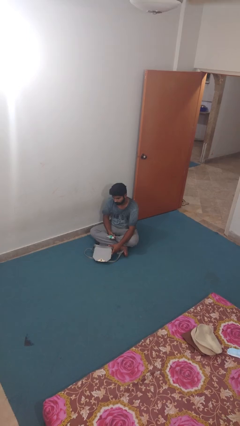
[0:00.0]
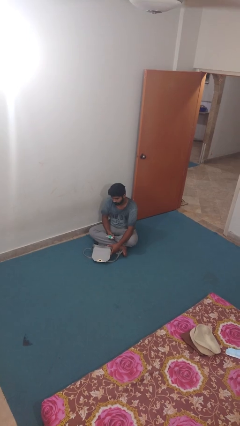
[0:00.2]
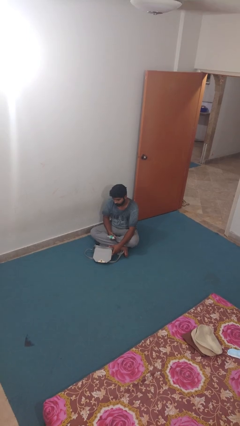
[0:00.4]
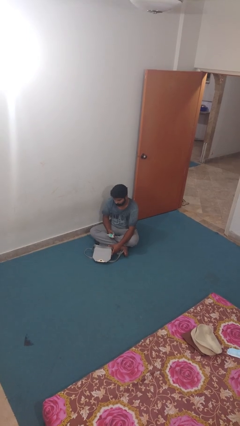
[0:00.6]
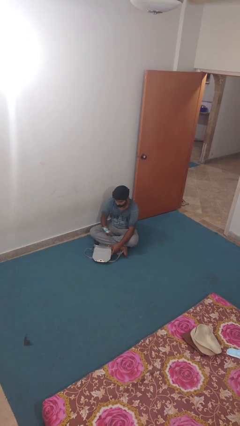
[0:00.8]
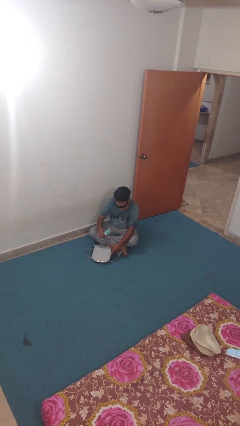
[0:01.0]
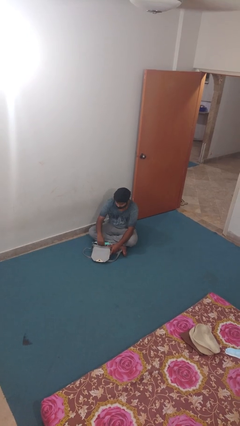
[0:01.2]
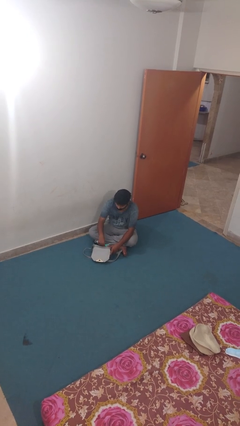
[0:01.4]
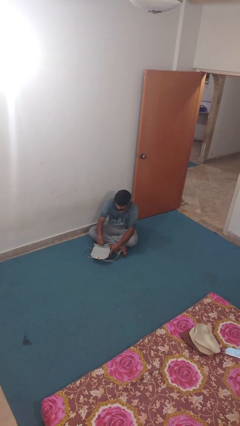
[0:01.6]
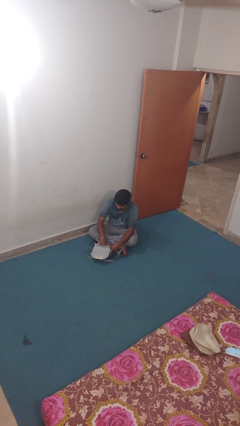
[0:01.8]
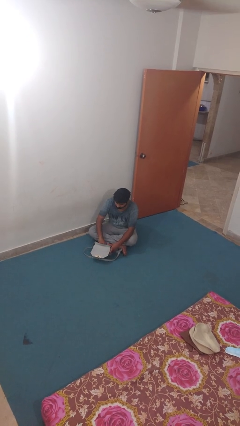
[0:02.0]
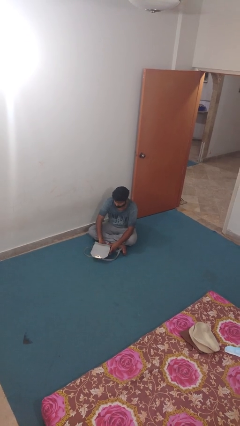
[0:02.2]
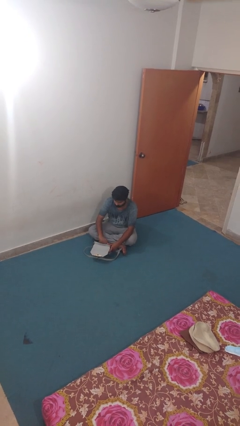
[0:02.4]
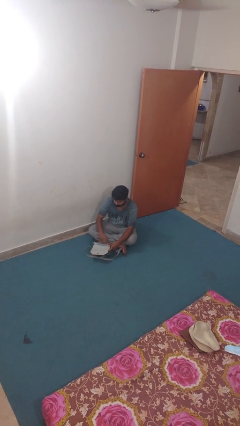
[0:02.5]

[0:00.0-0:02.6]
person puts object into purse

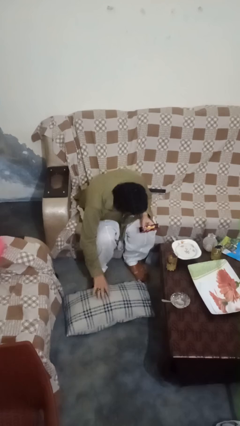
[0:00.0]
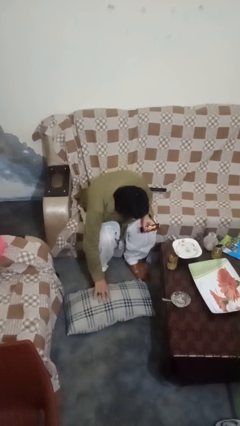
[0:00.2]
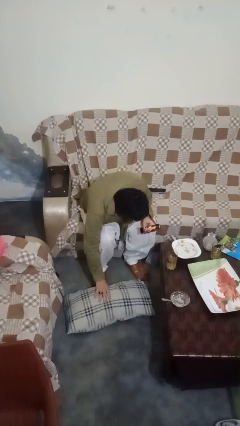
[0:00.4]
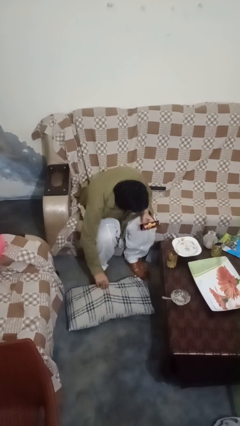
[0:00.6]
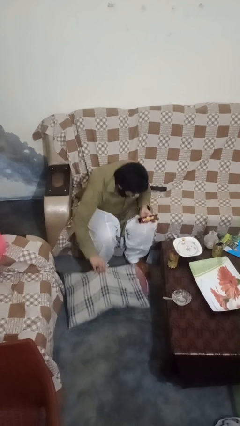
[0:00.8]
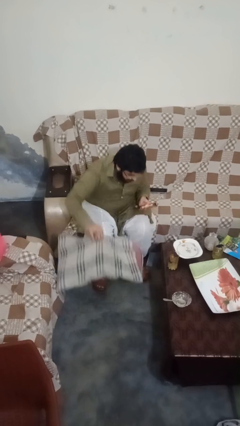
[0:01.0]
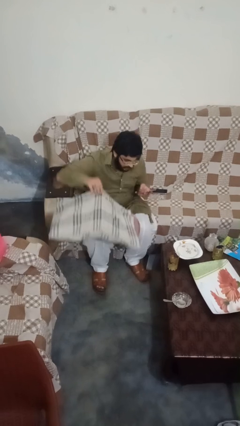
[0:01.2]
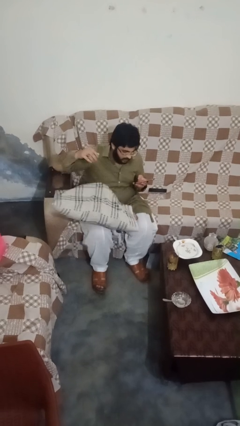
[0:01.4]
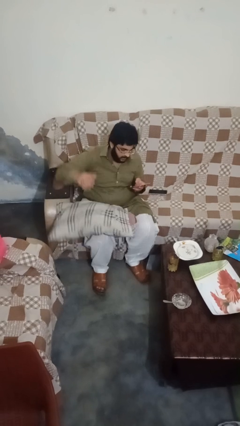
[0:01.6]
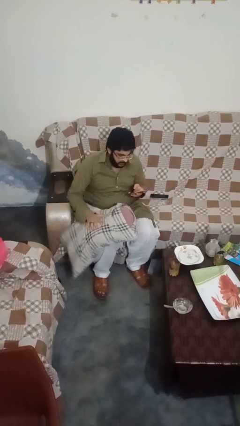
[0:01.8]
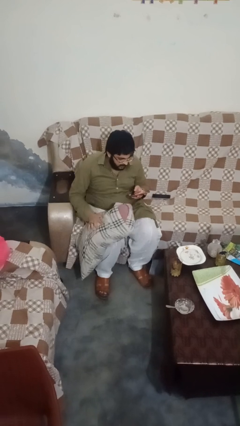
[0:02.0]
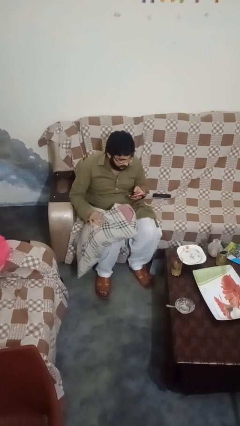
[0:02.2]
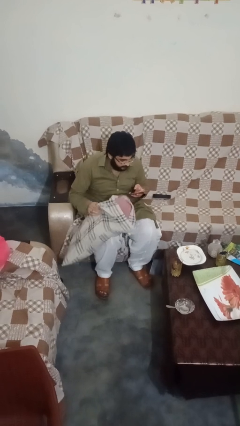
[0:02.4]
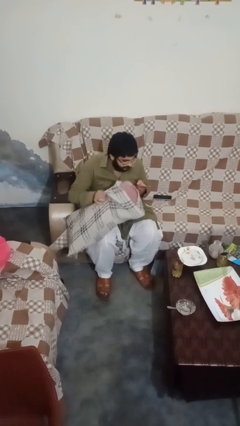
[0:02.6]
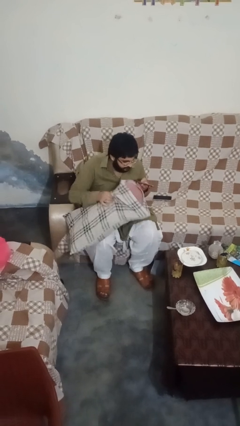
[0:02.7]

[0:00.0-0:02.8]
person picks up object from floor

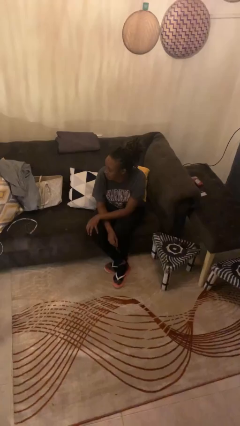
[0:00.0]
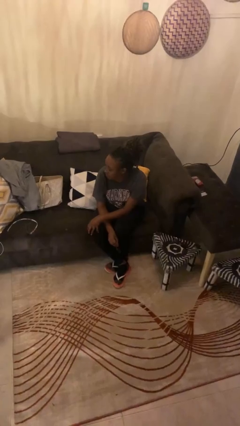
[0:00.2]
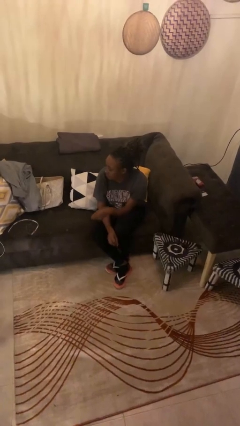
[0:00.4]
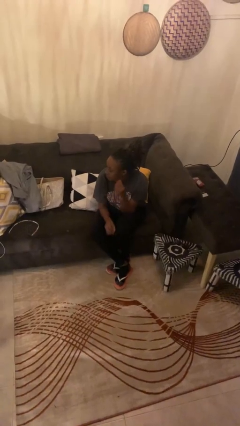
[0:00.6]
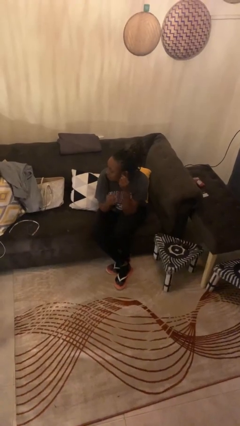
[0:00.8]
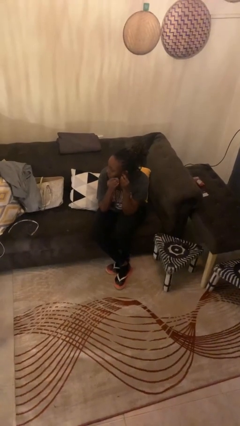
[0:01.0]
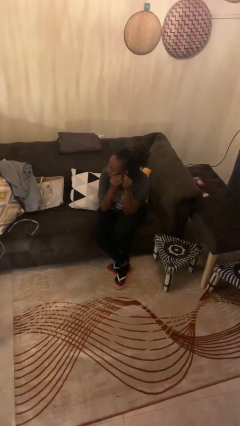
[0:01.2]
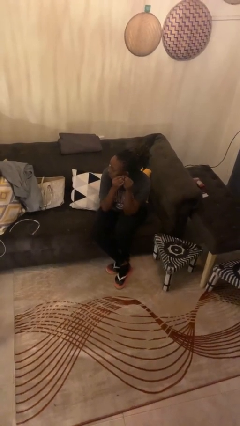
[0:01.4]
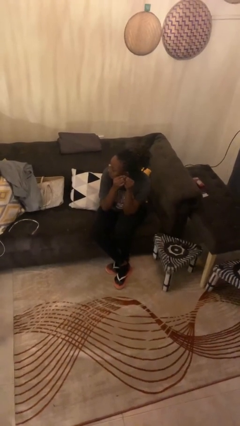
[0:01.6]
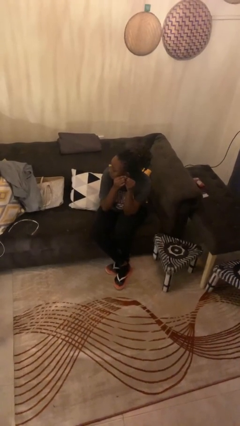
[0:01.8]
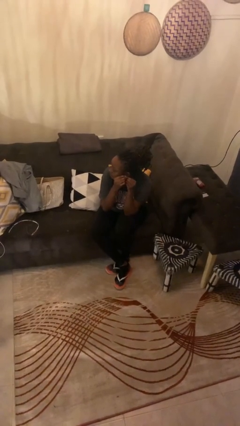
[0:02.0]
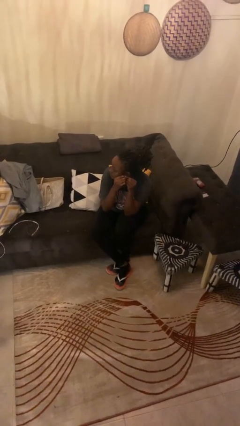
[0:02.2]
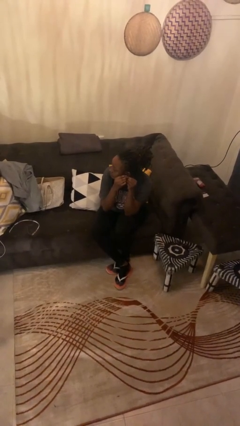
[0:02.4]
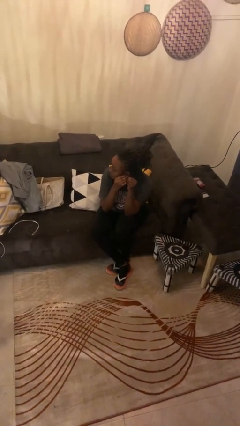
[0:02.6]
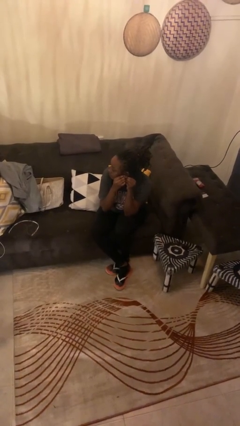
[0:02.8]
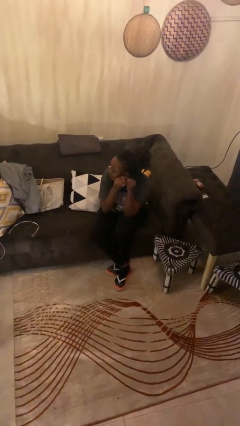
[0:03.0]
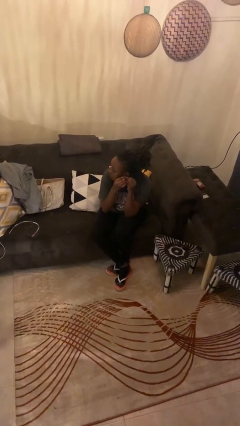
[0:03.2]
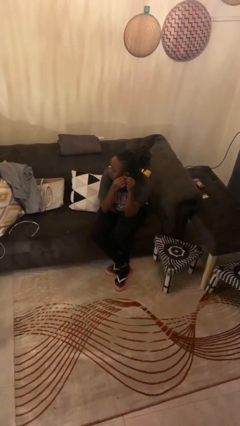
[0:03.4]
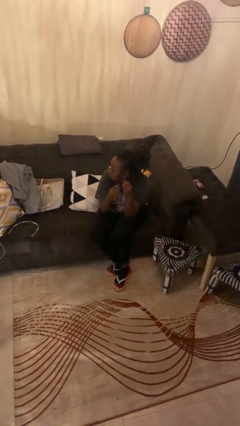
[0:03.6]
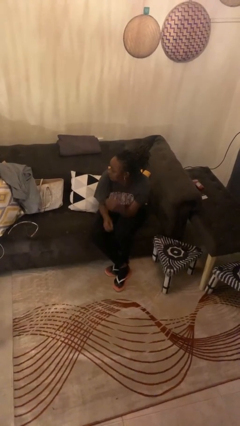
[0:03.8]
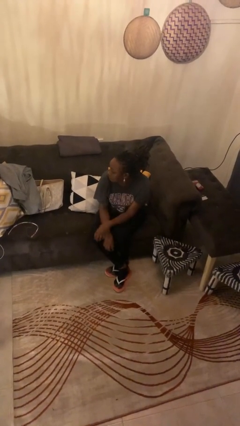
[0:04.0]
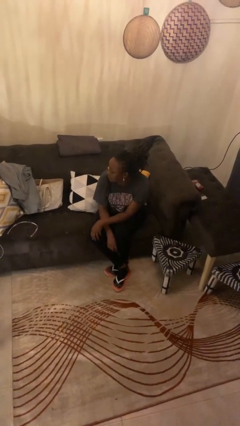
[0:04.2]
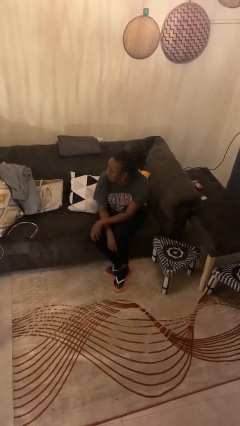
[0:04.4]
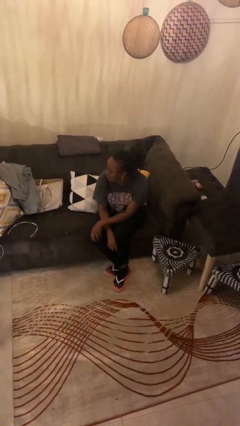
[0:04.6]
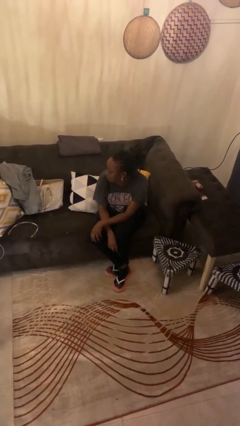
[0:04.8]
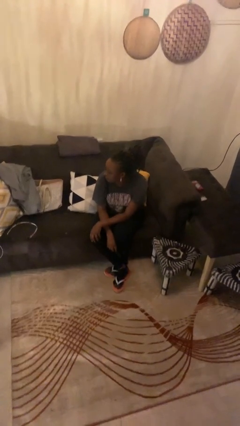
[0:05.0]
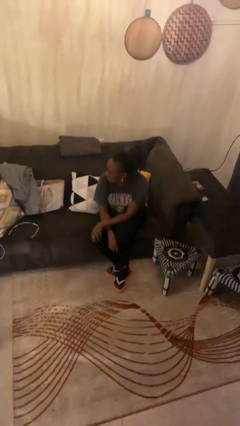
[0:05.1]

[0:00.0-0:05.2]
person puts on earrings

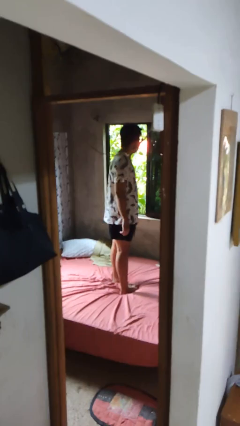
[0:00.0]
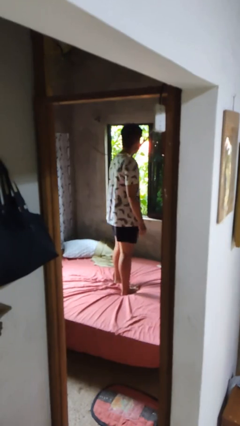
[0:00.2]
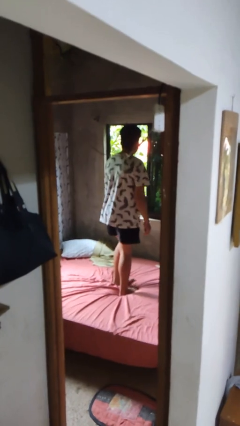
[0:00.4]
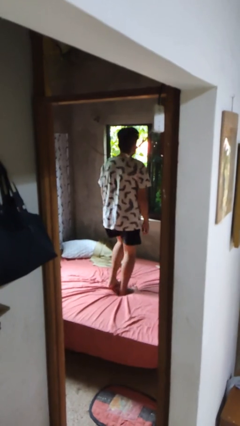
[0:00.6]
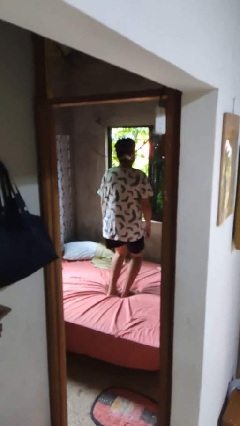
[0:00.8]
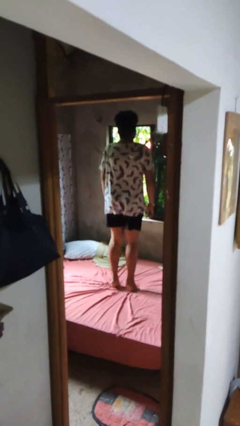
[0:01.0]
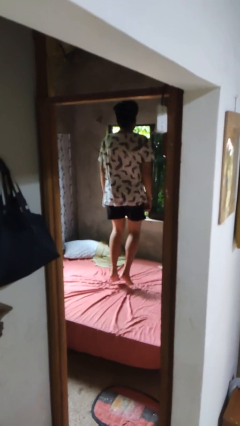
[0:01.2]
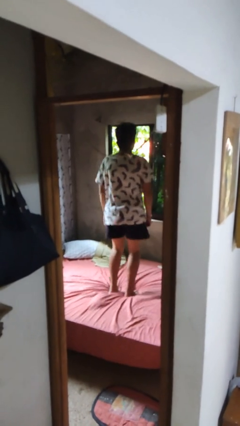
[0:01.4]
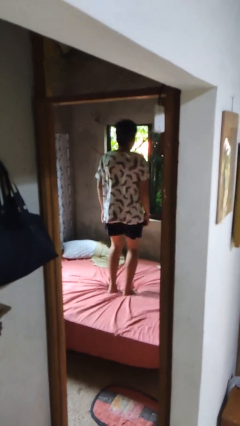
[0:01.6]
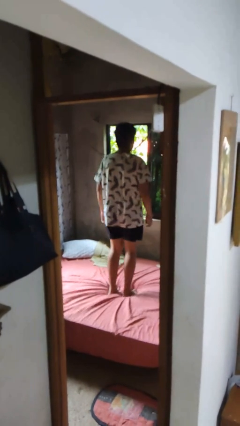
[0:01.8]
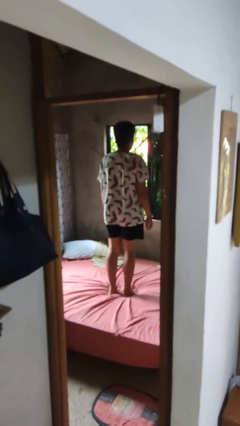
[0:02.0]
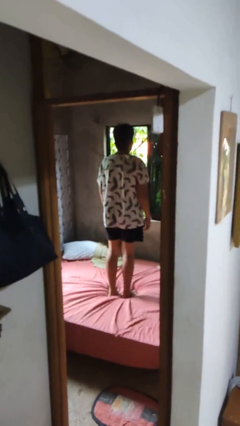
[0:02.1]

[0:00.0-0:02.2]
person jumps on bed

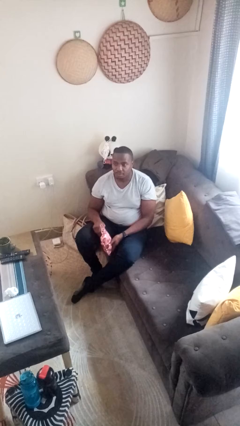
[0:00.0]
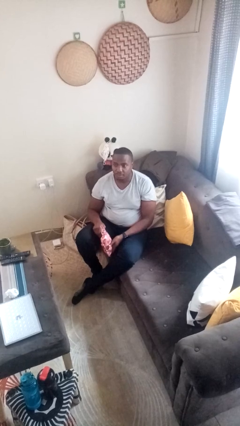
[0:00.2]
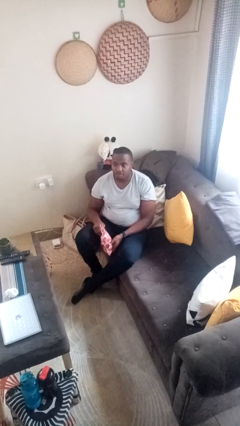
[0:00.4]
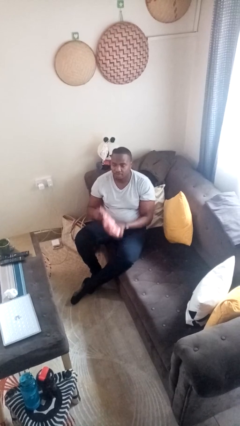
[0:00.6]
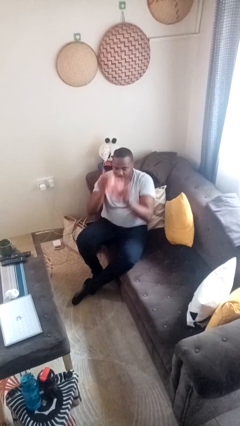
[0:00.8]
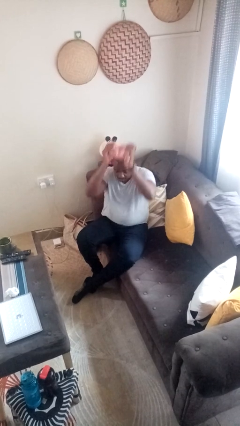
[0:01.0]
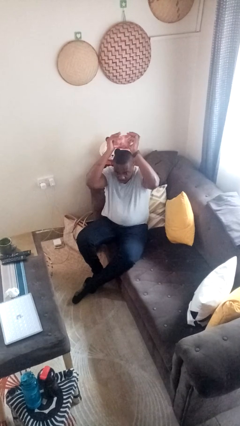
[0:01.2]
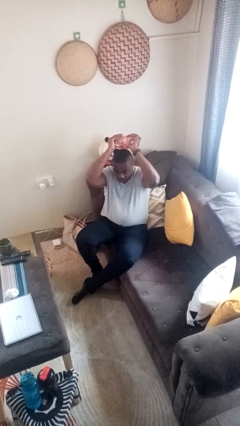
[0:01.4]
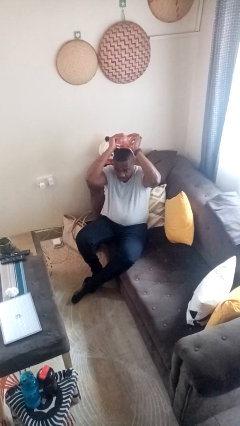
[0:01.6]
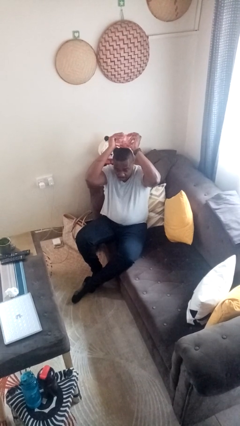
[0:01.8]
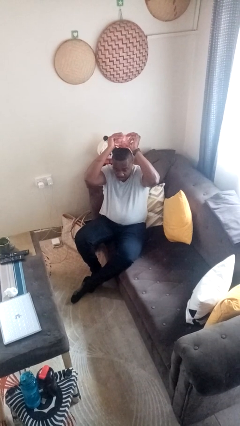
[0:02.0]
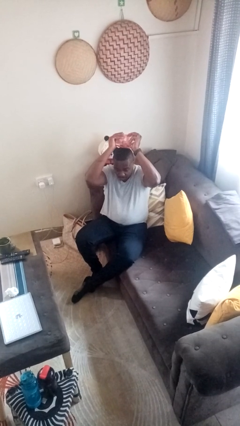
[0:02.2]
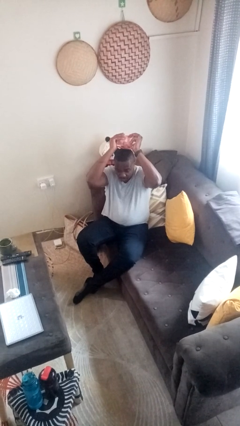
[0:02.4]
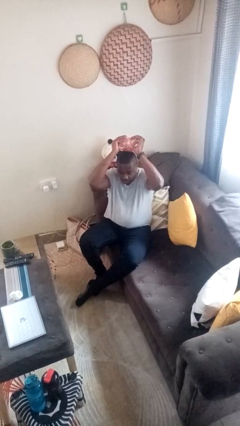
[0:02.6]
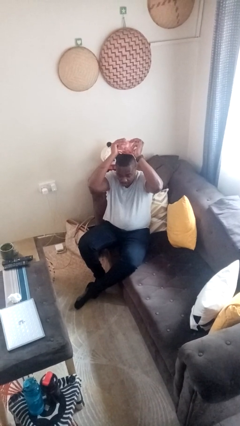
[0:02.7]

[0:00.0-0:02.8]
person holds object above head

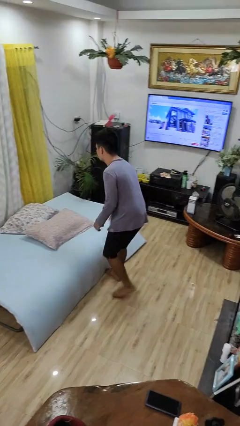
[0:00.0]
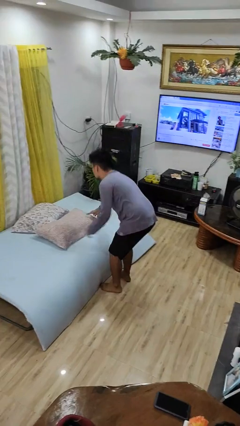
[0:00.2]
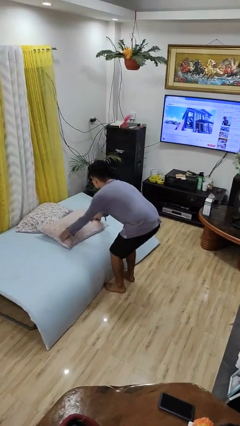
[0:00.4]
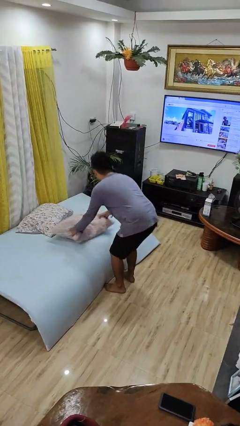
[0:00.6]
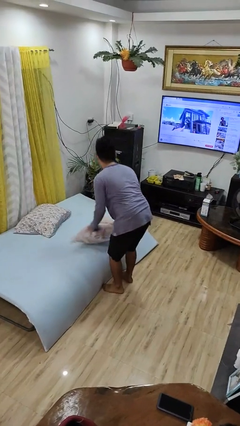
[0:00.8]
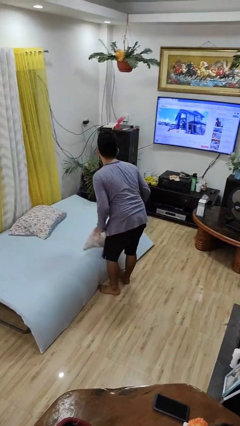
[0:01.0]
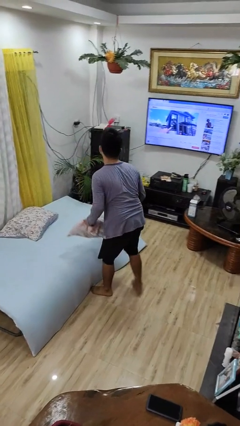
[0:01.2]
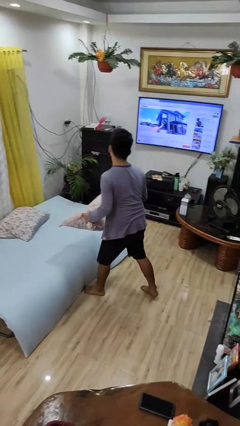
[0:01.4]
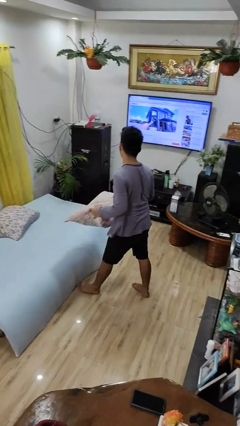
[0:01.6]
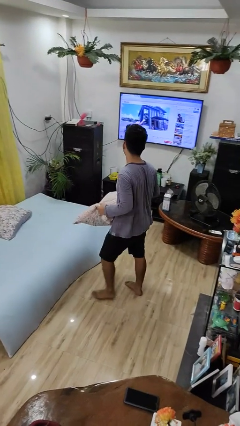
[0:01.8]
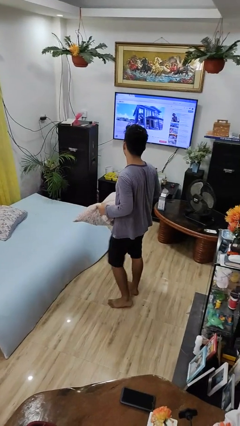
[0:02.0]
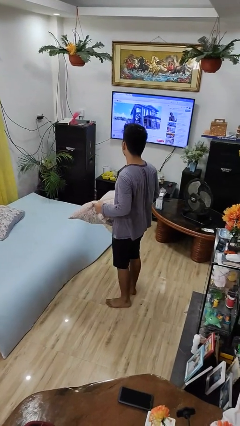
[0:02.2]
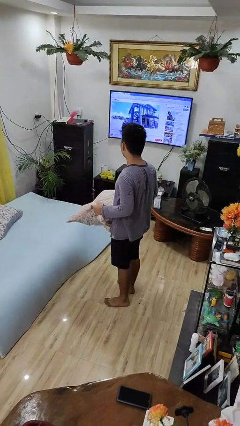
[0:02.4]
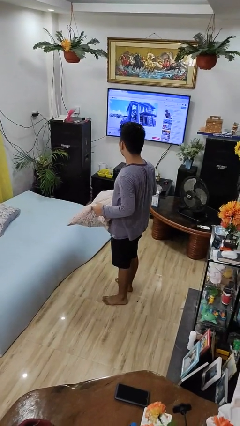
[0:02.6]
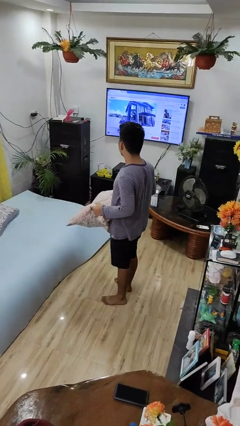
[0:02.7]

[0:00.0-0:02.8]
person picks up object from bed
